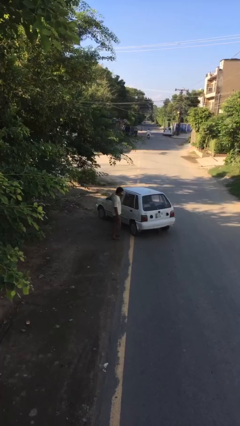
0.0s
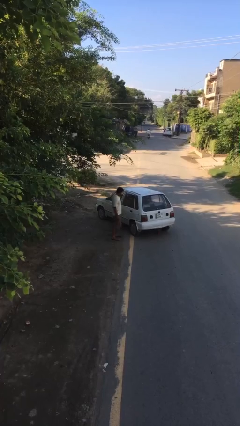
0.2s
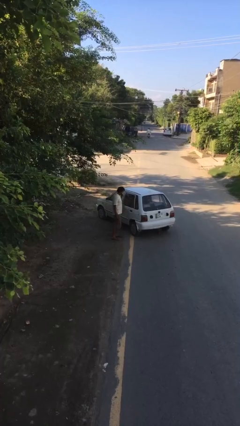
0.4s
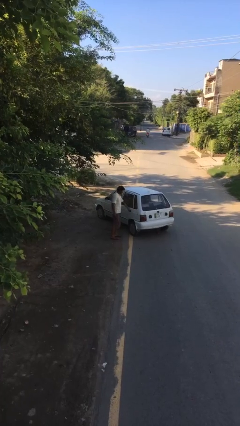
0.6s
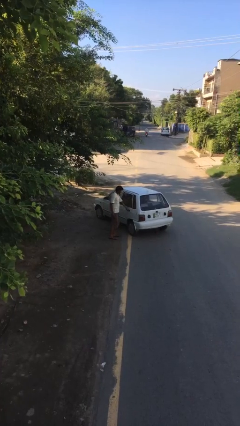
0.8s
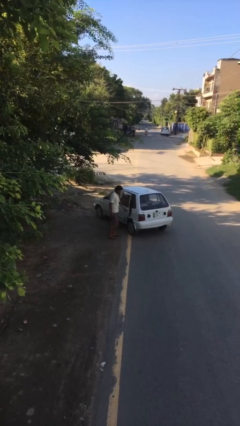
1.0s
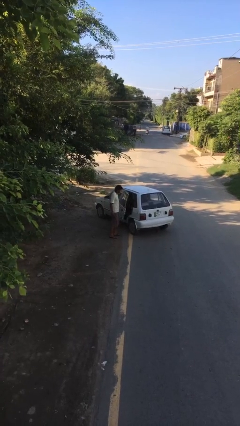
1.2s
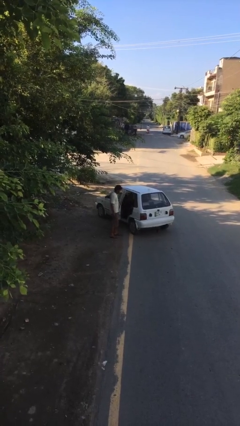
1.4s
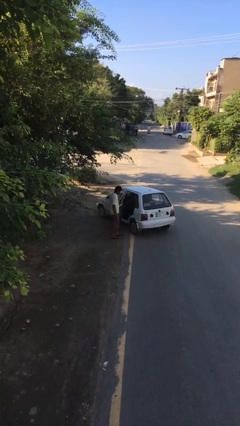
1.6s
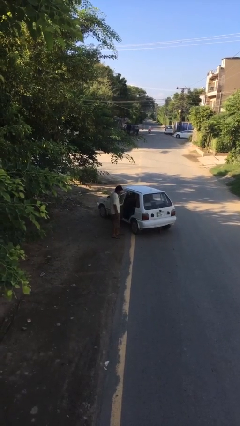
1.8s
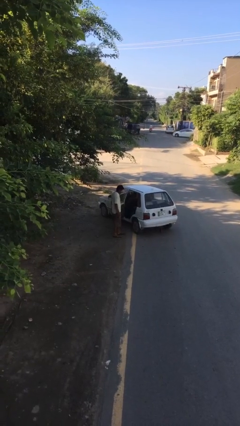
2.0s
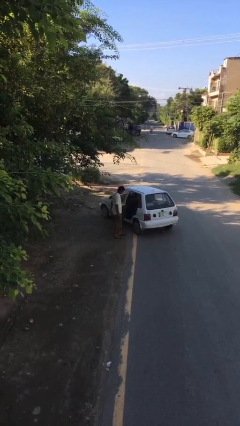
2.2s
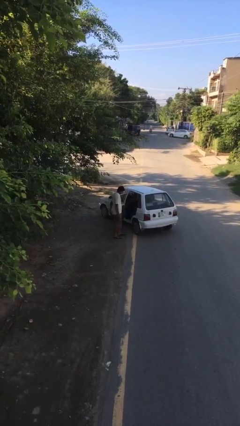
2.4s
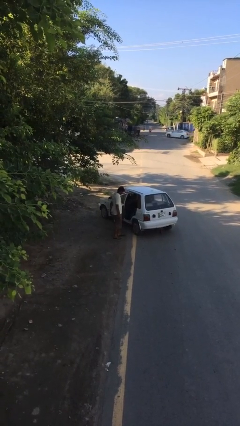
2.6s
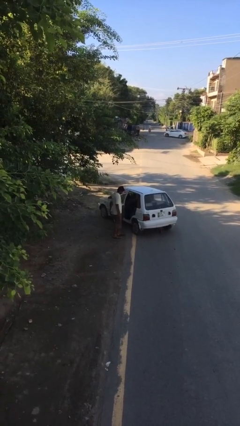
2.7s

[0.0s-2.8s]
person opens car door

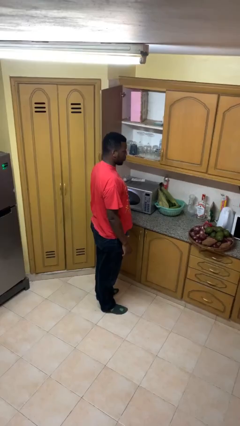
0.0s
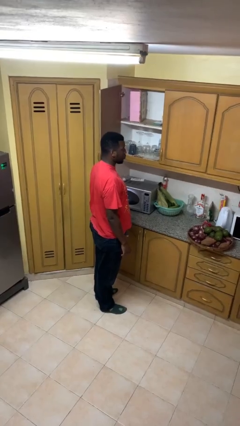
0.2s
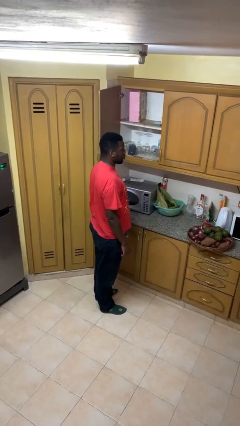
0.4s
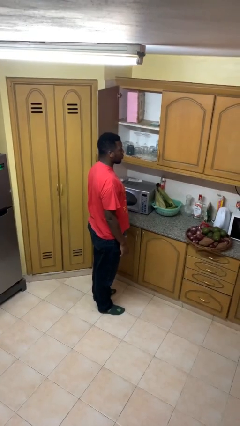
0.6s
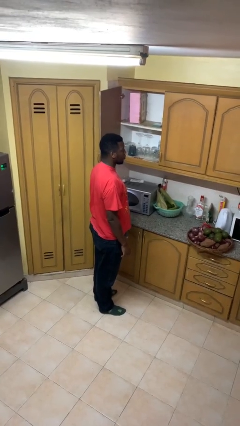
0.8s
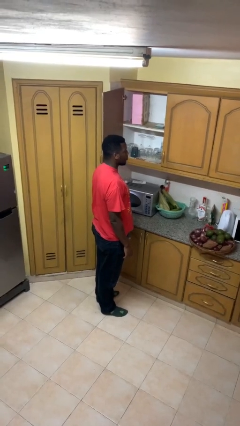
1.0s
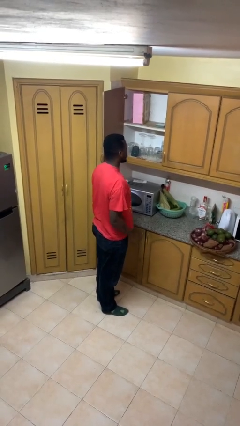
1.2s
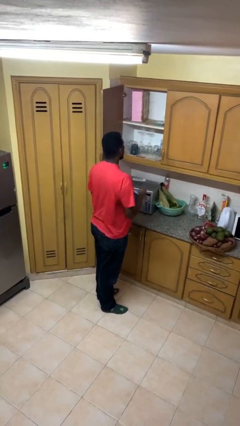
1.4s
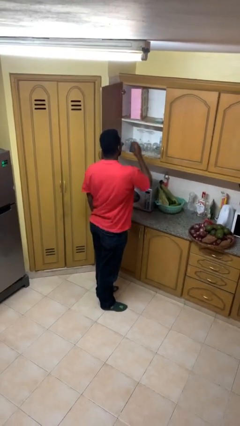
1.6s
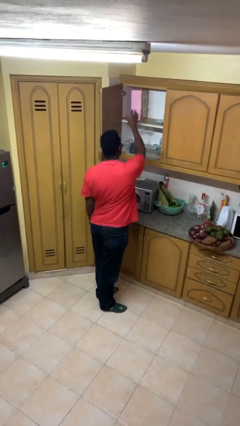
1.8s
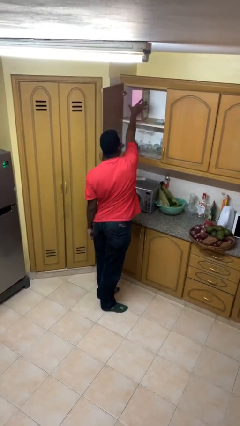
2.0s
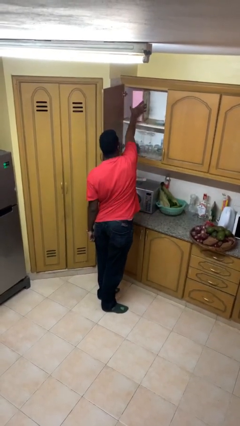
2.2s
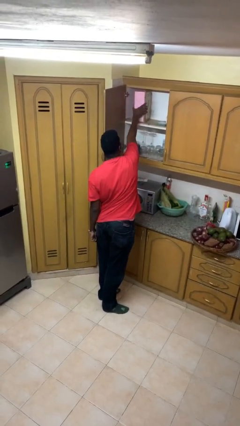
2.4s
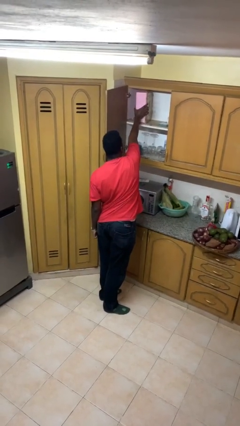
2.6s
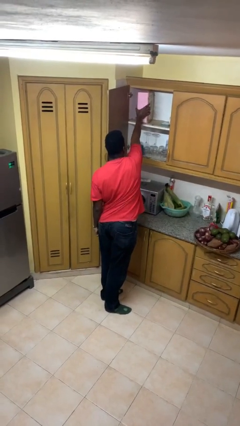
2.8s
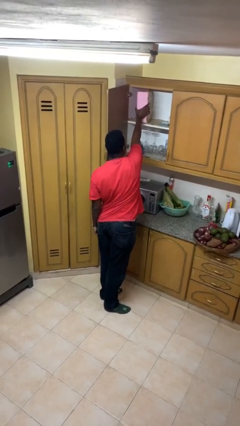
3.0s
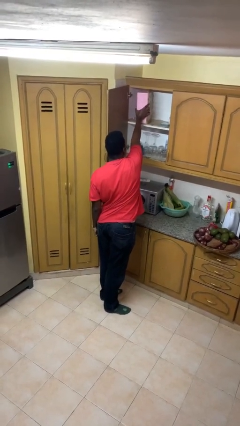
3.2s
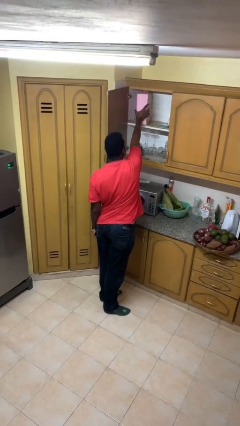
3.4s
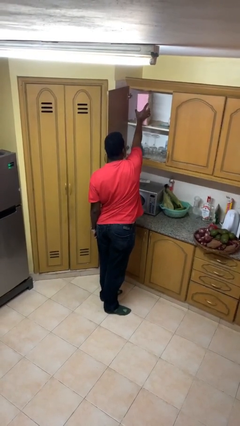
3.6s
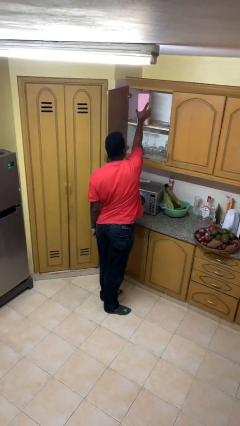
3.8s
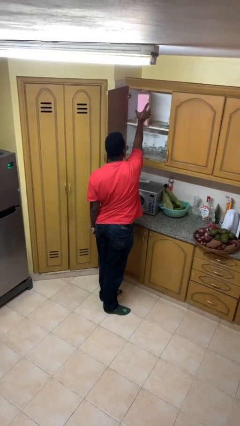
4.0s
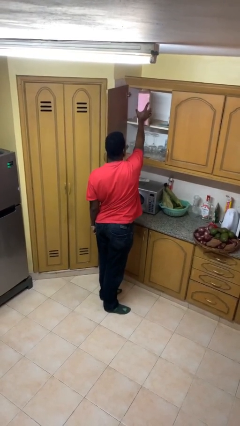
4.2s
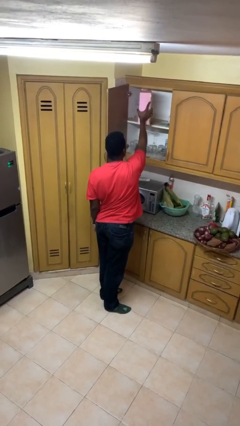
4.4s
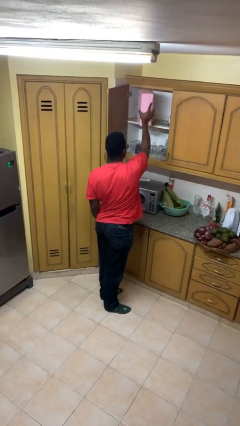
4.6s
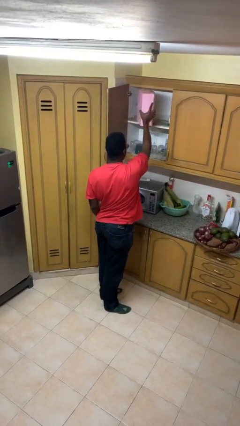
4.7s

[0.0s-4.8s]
person picks up object from shelf

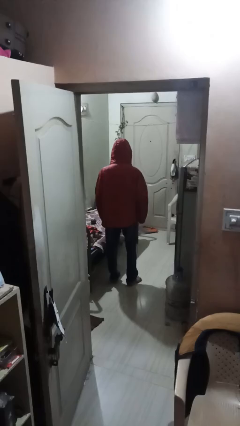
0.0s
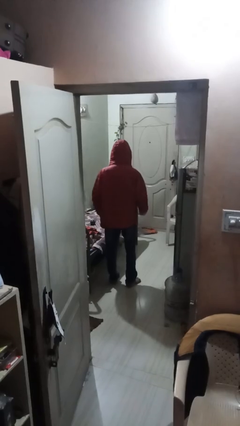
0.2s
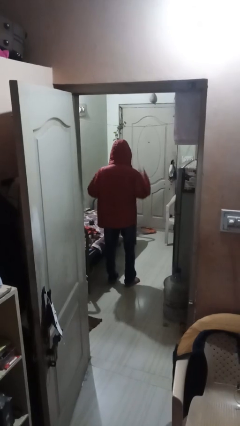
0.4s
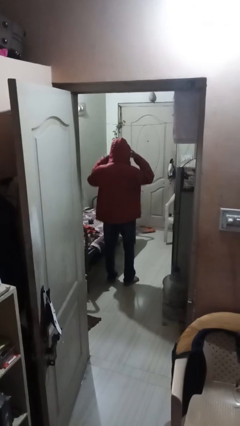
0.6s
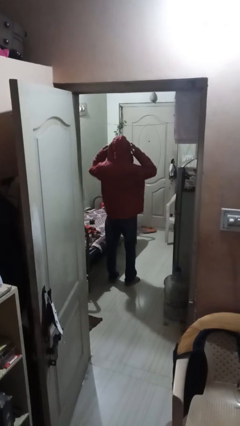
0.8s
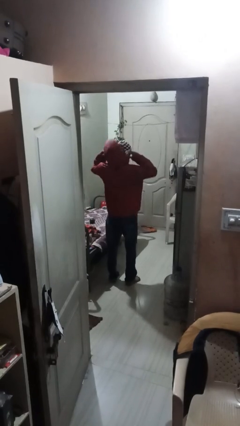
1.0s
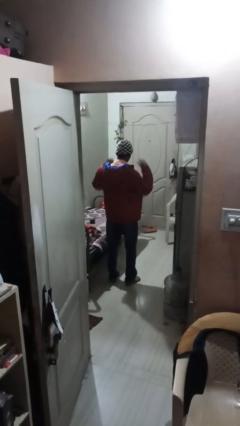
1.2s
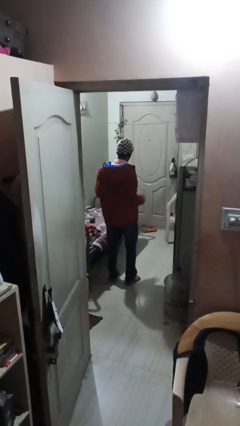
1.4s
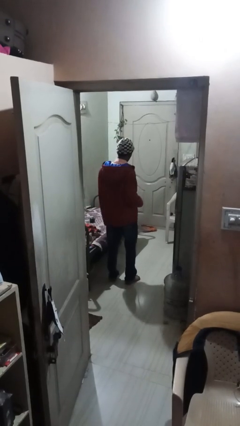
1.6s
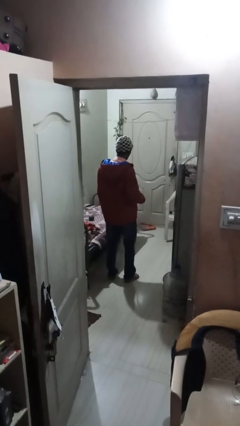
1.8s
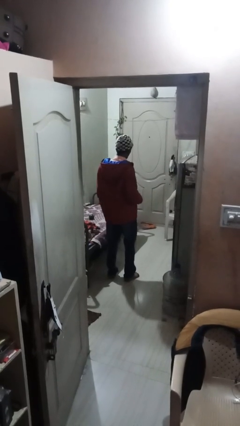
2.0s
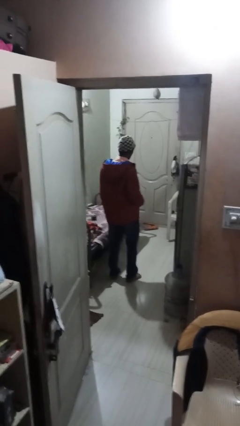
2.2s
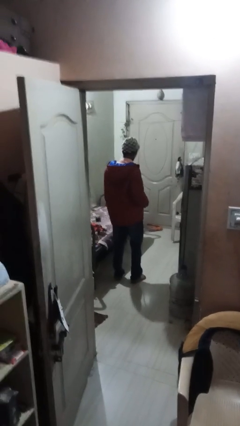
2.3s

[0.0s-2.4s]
person takes off hoodie

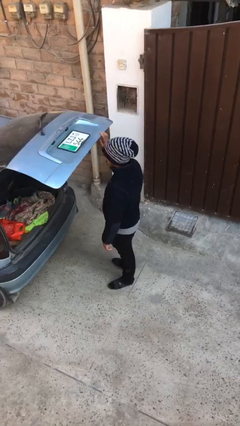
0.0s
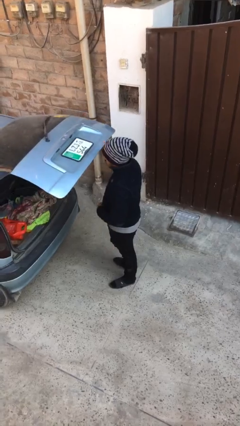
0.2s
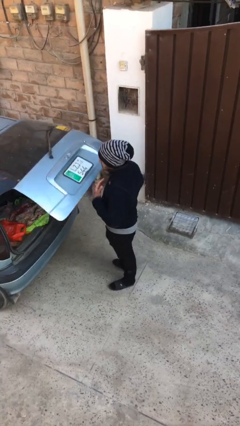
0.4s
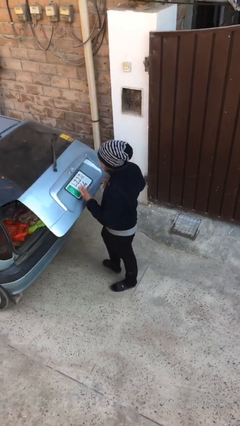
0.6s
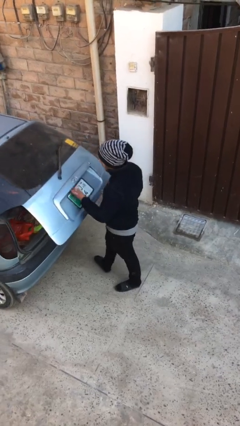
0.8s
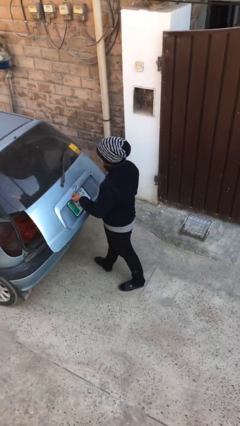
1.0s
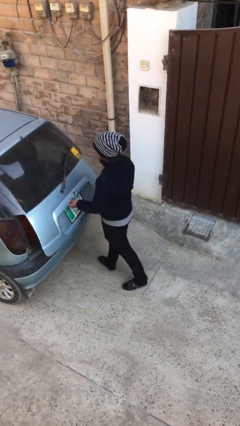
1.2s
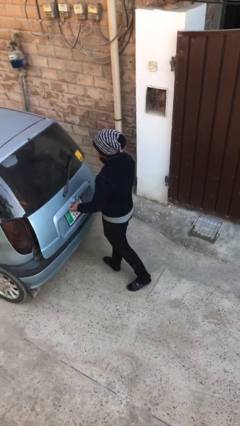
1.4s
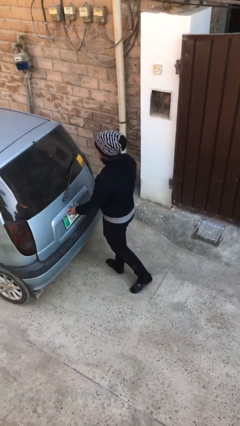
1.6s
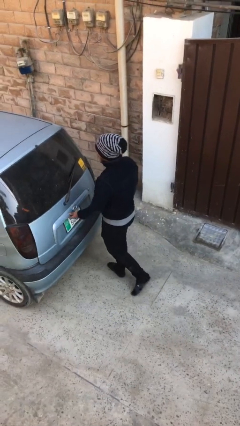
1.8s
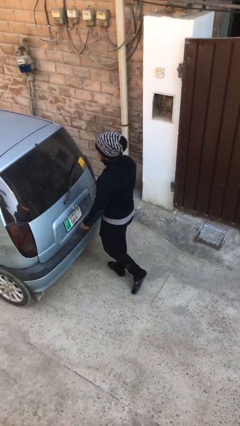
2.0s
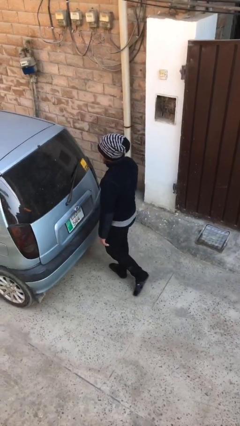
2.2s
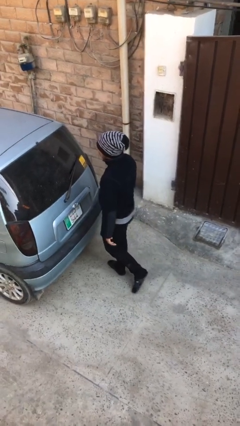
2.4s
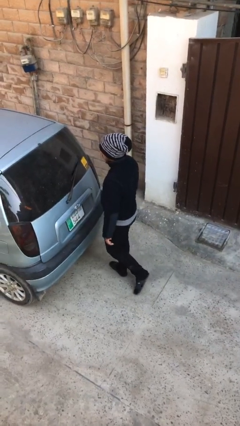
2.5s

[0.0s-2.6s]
person closes car trunk

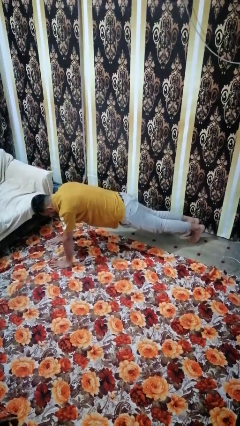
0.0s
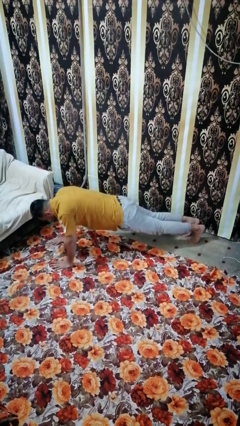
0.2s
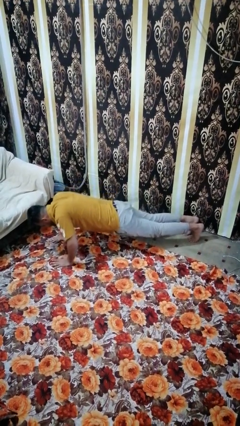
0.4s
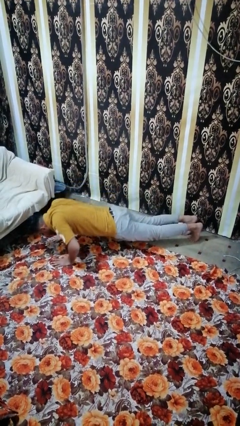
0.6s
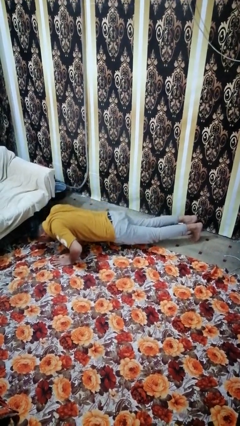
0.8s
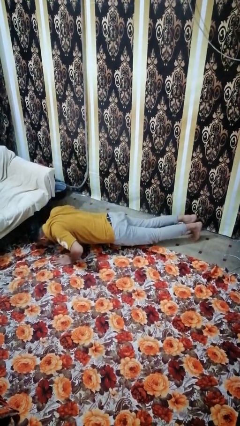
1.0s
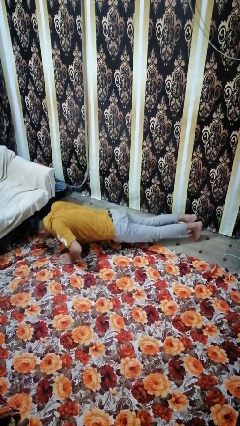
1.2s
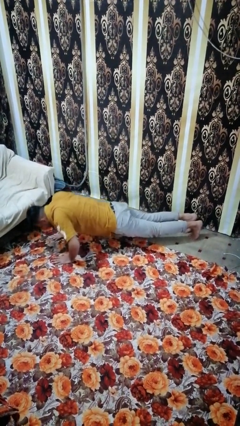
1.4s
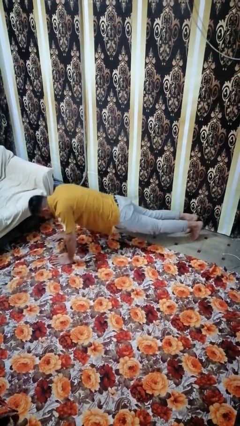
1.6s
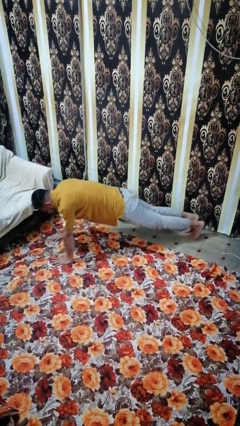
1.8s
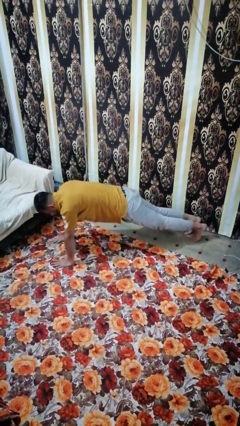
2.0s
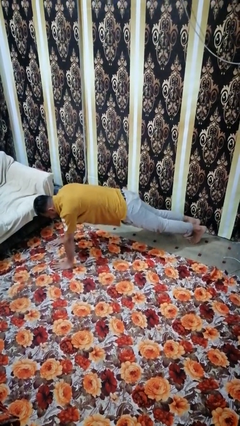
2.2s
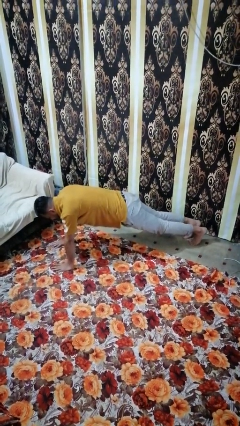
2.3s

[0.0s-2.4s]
person exercises with pushup

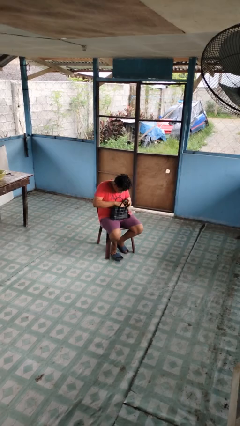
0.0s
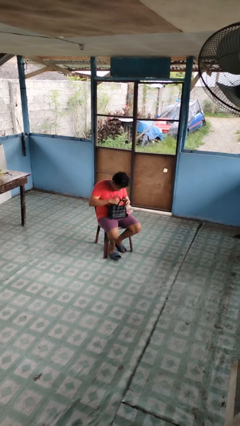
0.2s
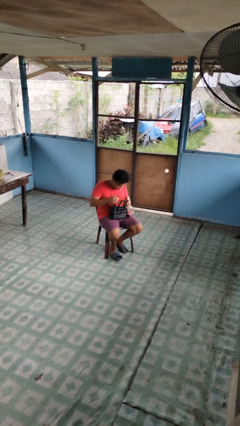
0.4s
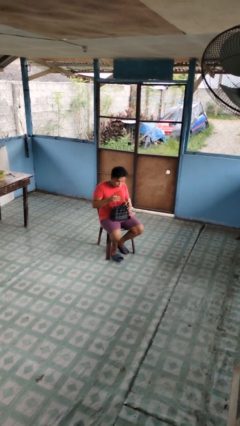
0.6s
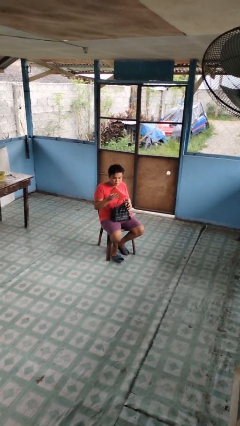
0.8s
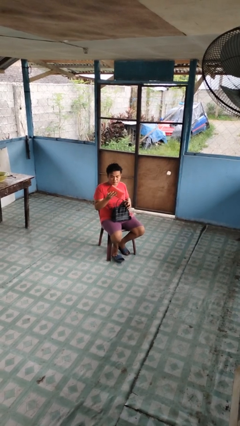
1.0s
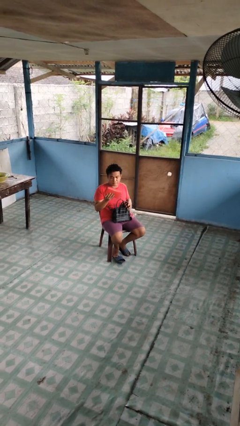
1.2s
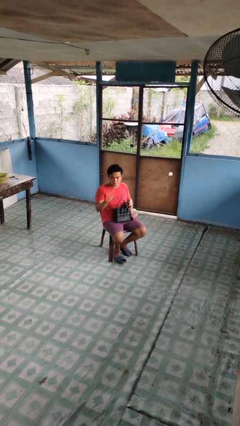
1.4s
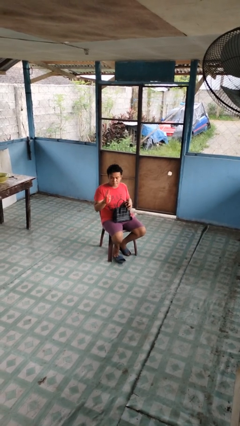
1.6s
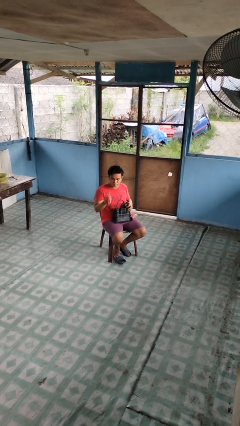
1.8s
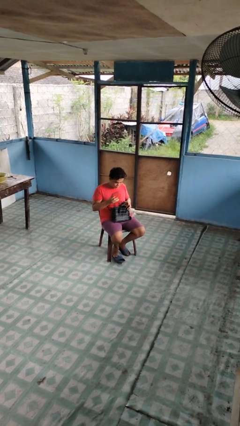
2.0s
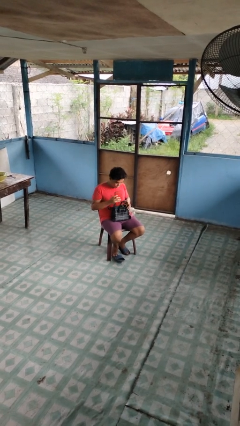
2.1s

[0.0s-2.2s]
person takes object from purse

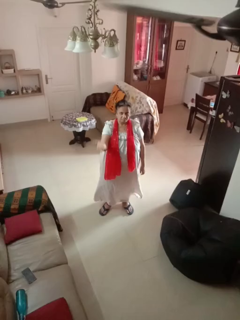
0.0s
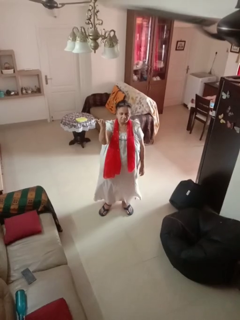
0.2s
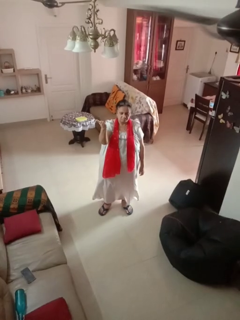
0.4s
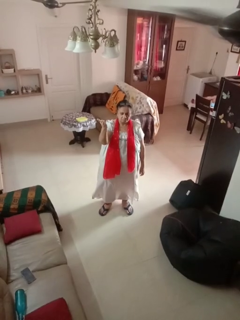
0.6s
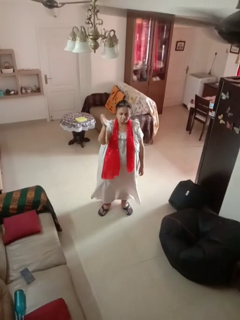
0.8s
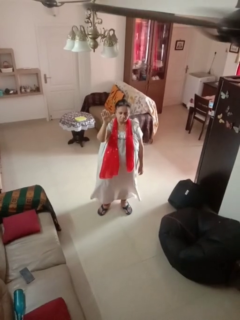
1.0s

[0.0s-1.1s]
person gestures swipe up
